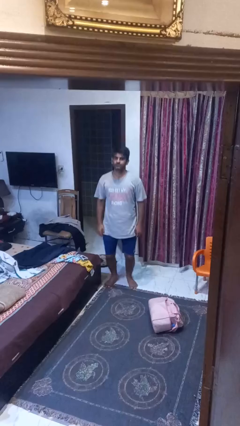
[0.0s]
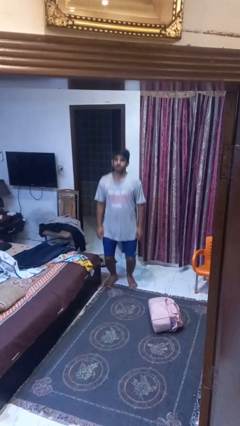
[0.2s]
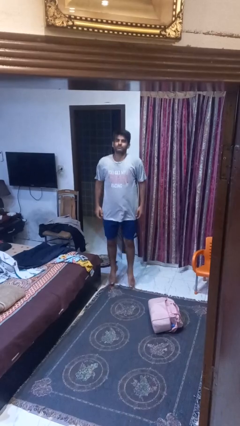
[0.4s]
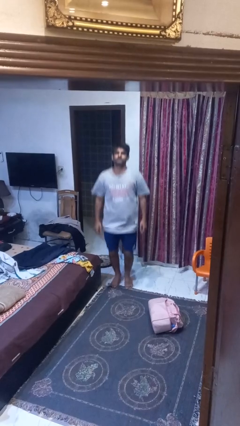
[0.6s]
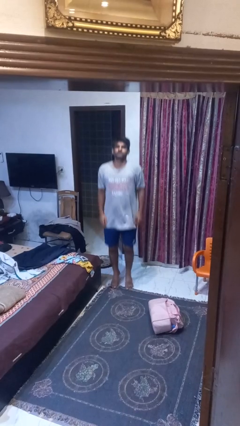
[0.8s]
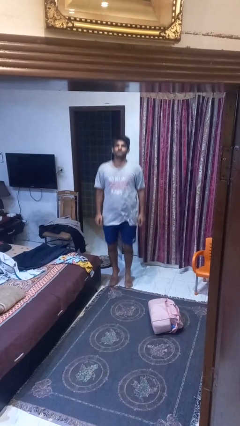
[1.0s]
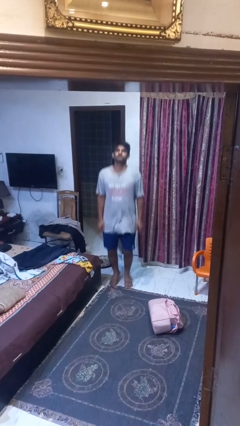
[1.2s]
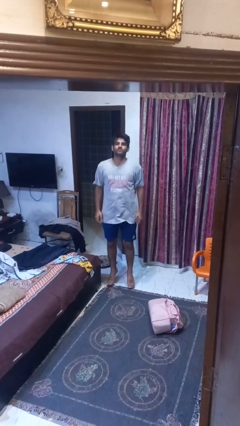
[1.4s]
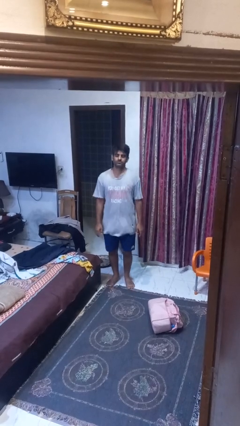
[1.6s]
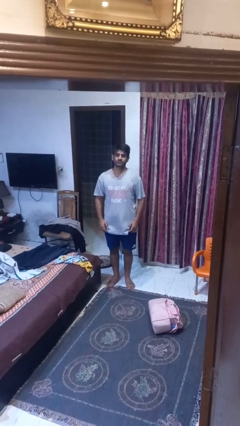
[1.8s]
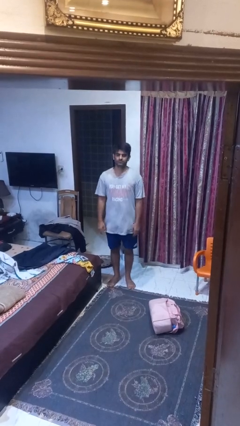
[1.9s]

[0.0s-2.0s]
person jumps

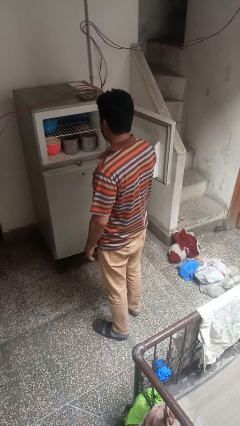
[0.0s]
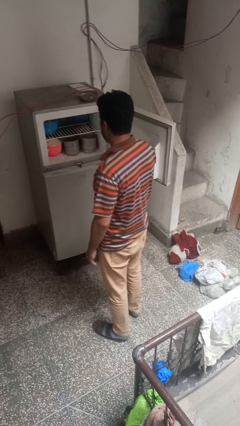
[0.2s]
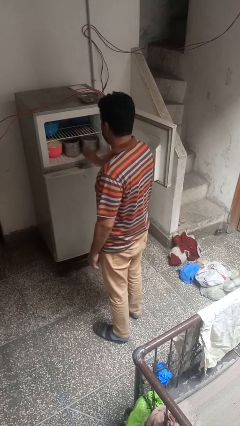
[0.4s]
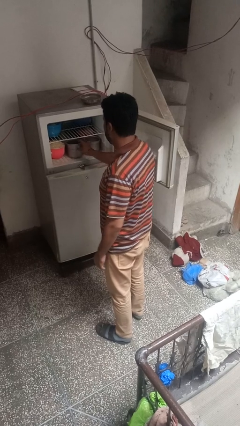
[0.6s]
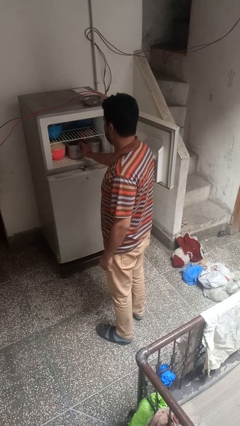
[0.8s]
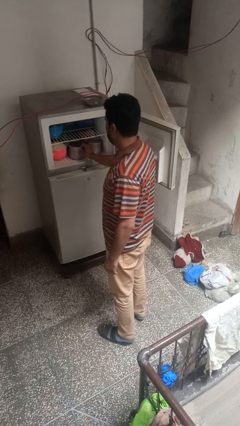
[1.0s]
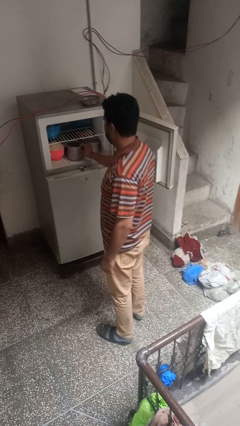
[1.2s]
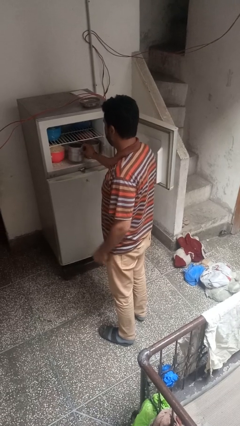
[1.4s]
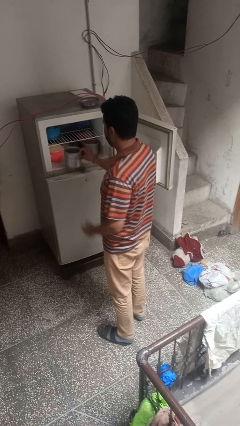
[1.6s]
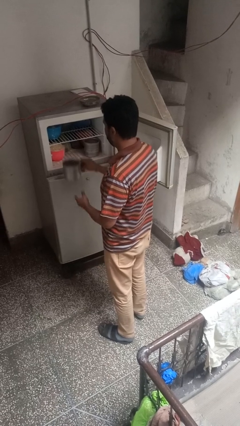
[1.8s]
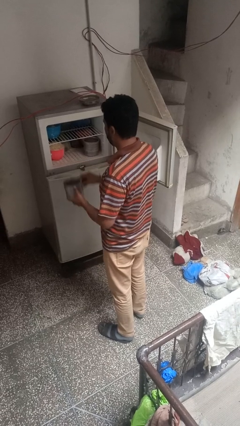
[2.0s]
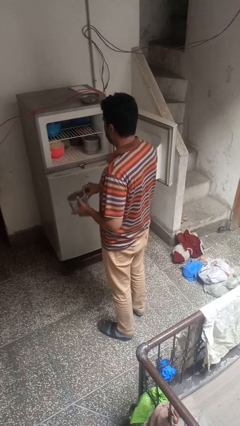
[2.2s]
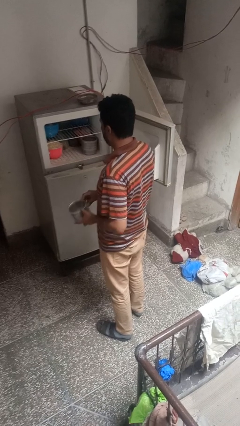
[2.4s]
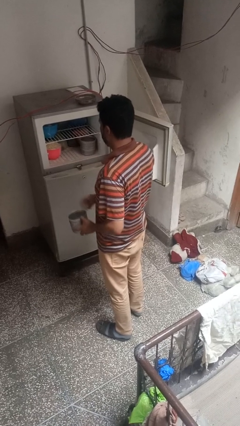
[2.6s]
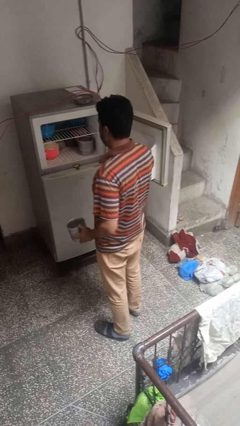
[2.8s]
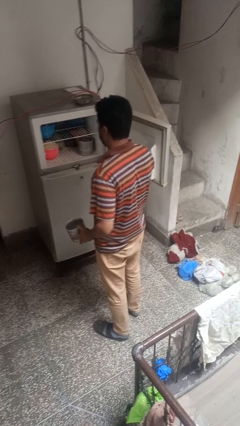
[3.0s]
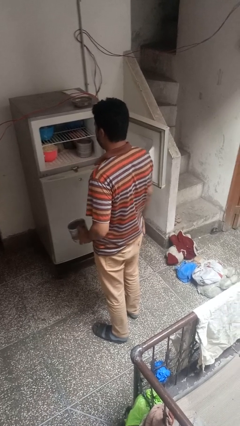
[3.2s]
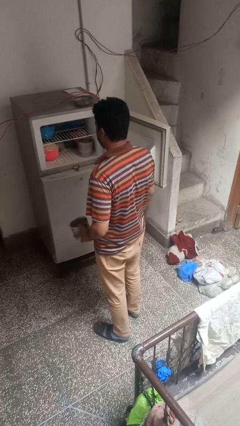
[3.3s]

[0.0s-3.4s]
person takes object from refrigerator

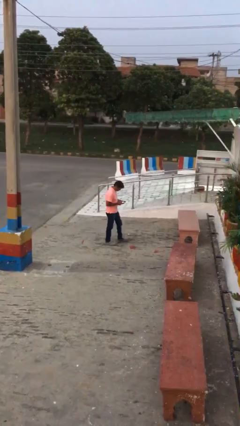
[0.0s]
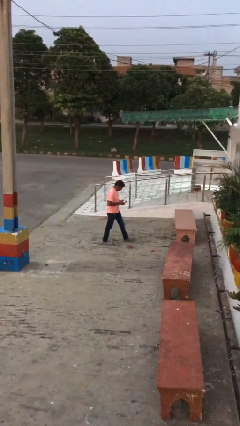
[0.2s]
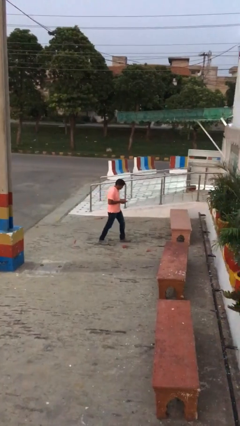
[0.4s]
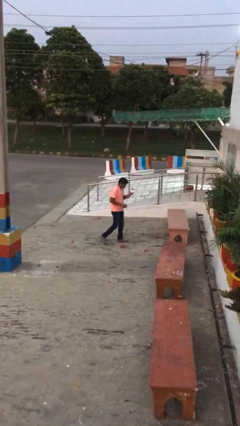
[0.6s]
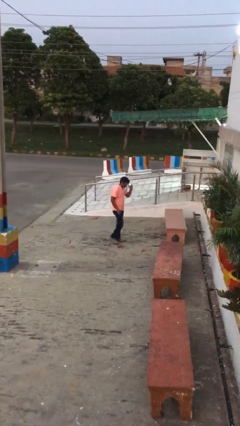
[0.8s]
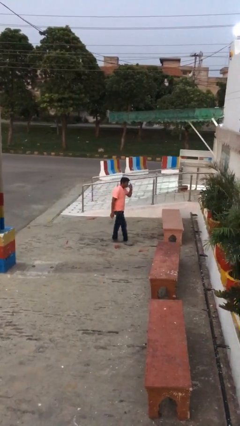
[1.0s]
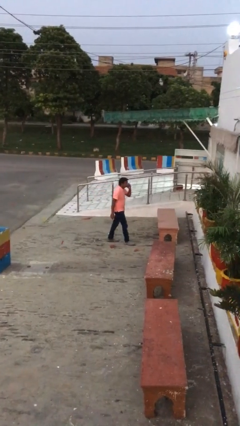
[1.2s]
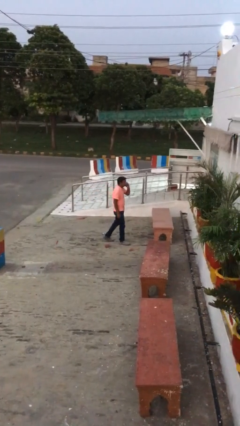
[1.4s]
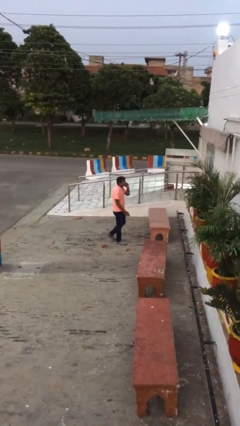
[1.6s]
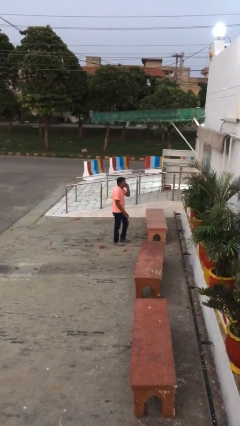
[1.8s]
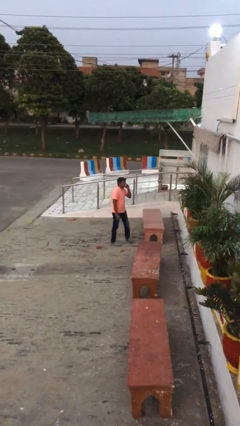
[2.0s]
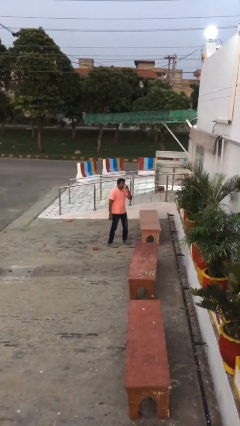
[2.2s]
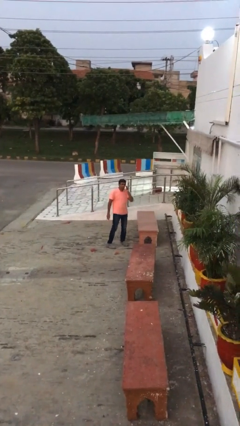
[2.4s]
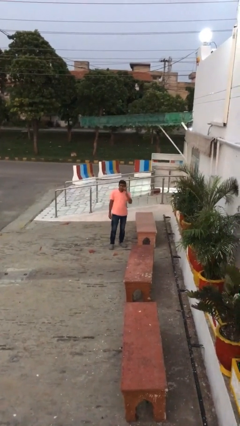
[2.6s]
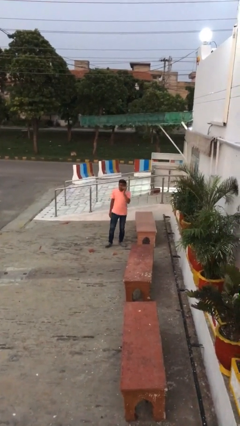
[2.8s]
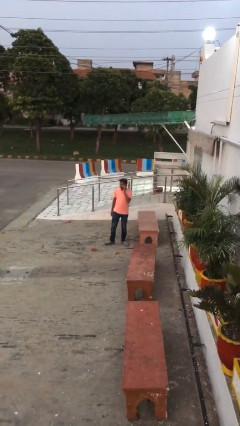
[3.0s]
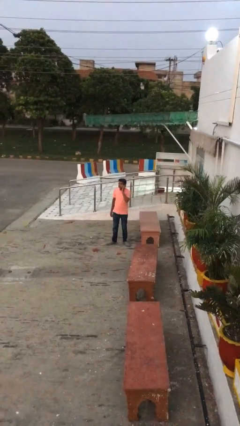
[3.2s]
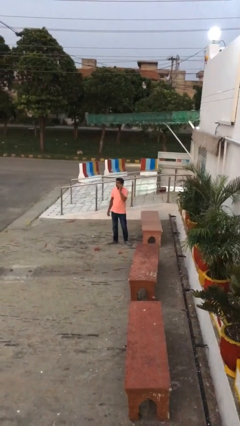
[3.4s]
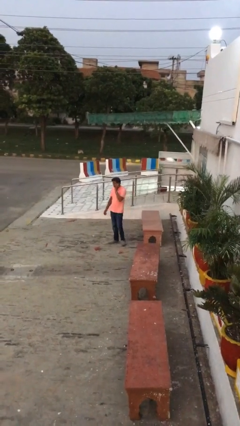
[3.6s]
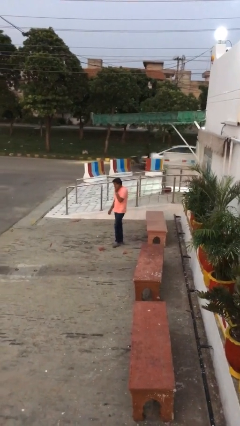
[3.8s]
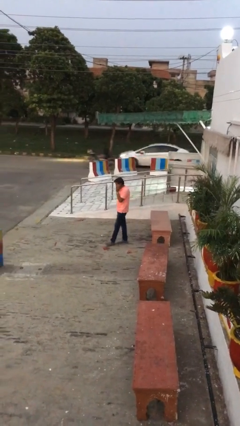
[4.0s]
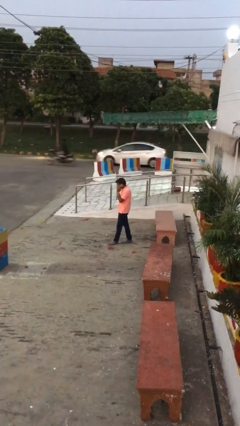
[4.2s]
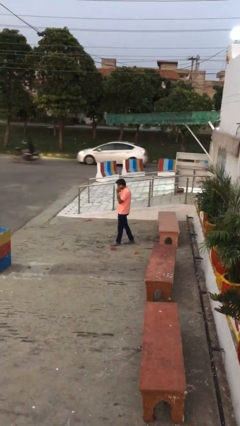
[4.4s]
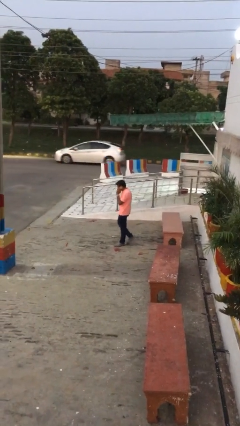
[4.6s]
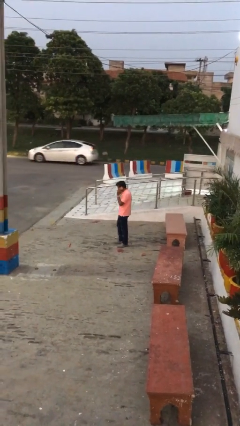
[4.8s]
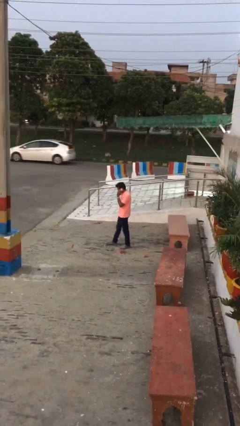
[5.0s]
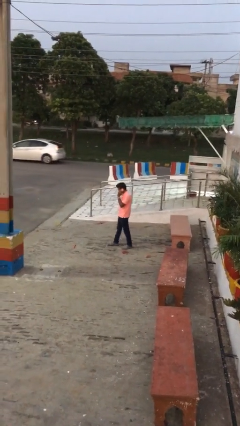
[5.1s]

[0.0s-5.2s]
person talks on phone

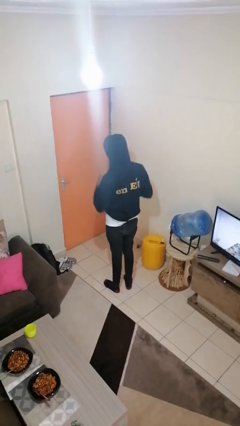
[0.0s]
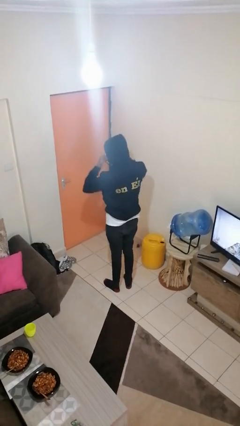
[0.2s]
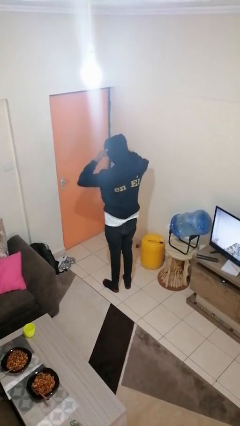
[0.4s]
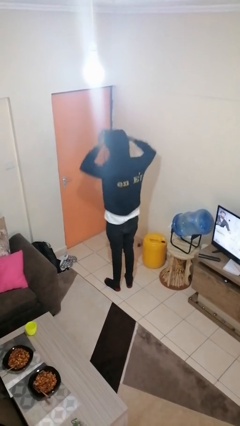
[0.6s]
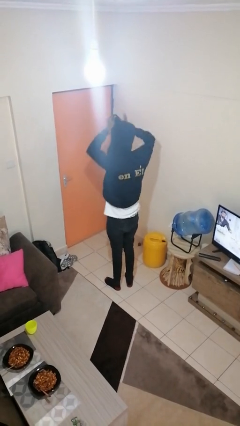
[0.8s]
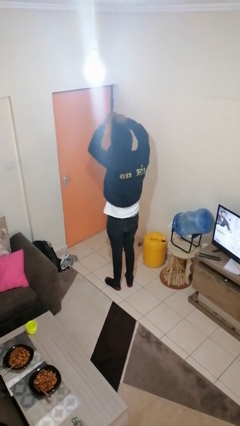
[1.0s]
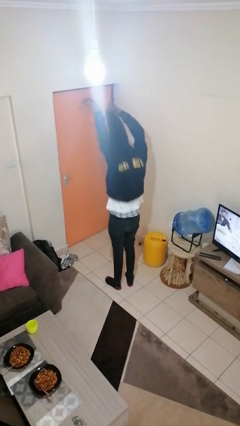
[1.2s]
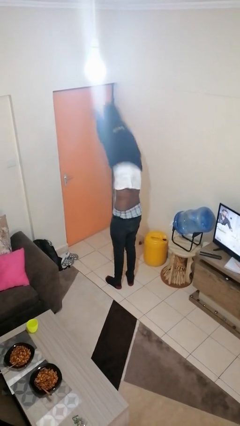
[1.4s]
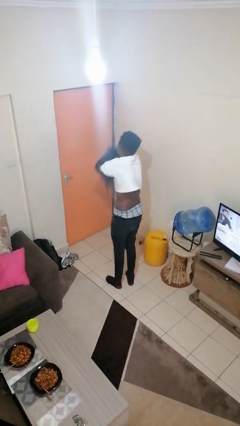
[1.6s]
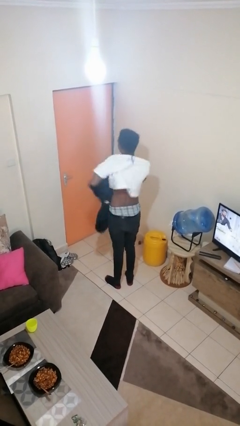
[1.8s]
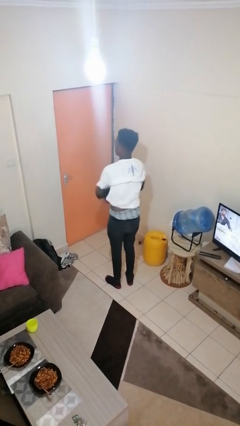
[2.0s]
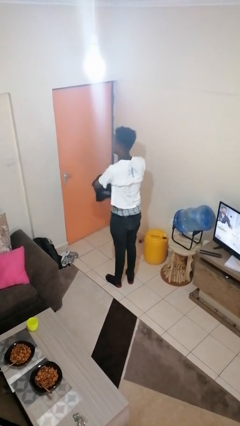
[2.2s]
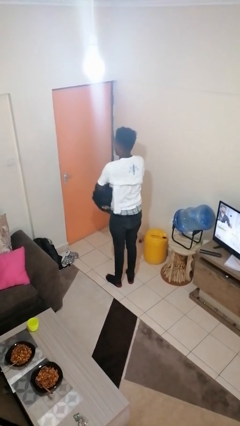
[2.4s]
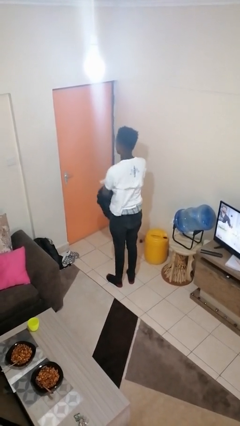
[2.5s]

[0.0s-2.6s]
person takes off hoodie

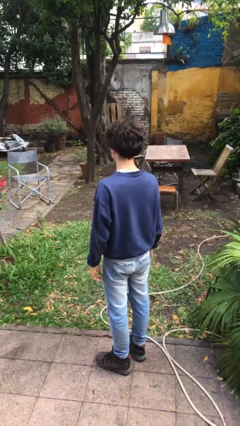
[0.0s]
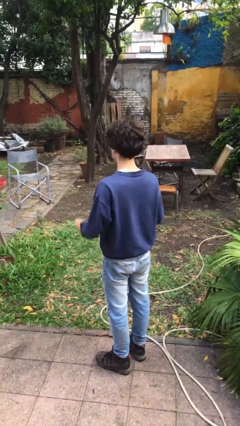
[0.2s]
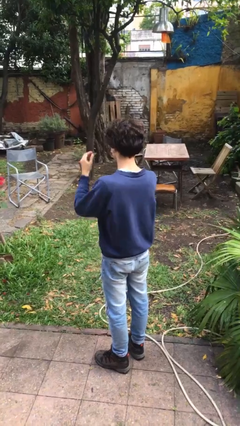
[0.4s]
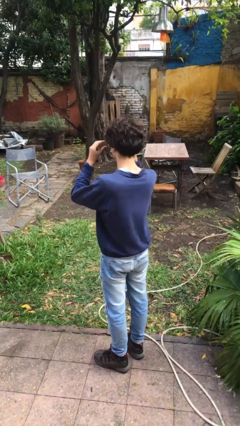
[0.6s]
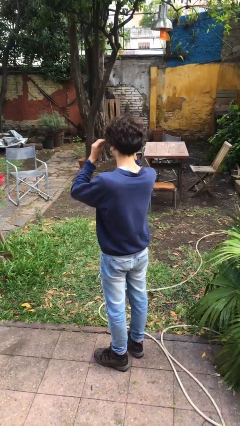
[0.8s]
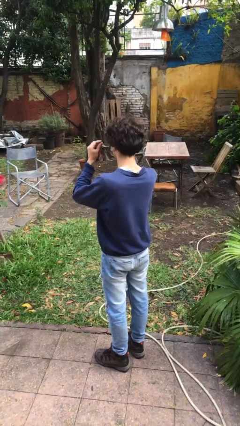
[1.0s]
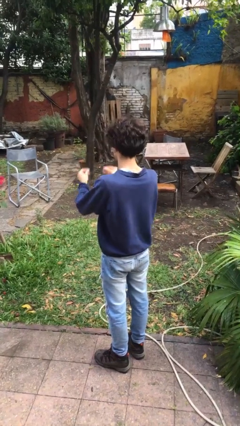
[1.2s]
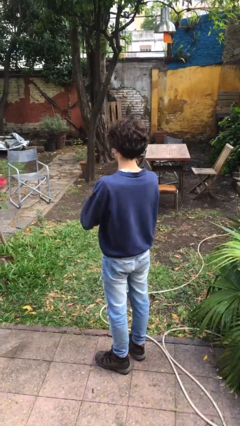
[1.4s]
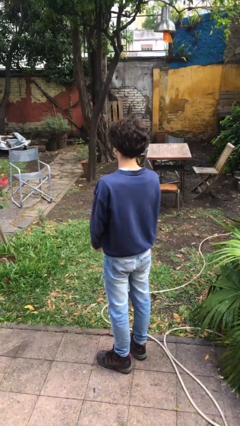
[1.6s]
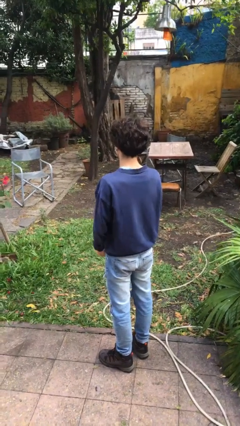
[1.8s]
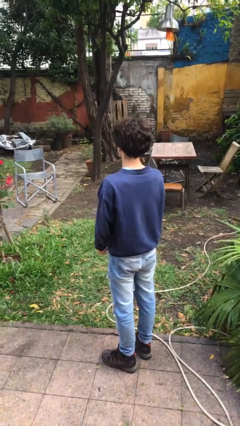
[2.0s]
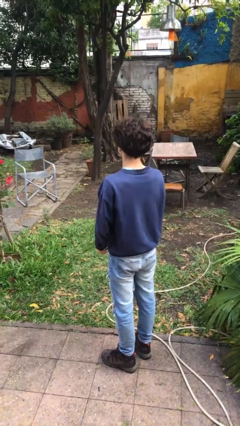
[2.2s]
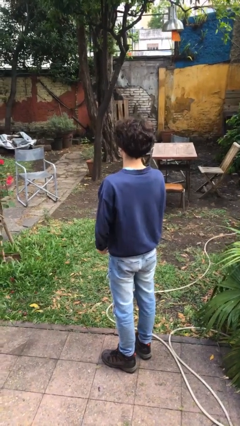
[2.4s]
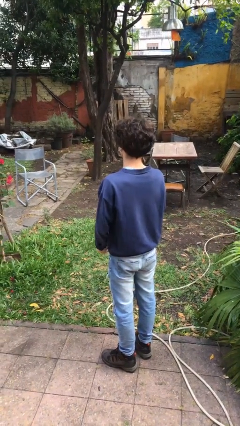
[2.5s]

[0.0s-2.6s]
person takes off glasses

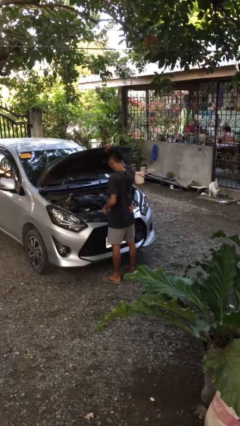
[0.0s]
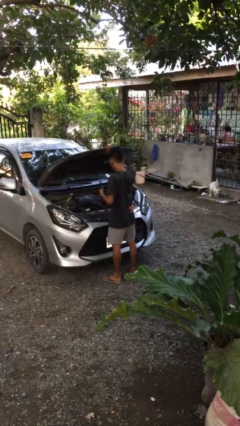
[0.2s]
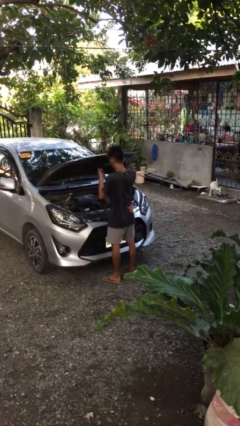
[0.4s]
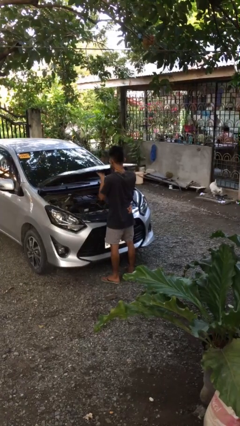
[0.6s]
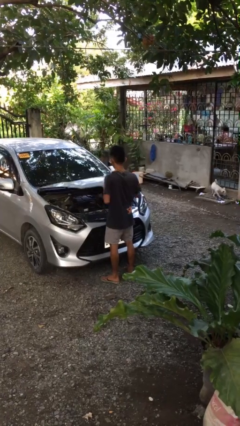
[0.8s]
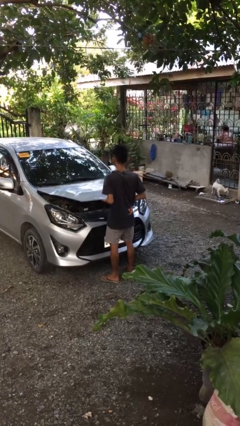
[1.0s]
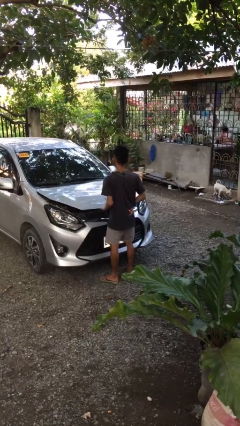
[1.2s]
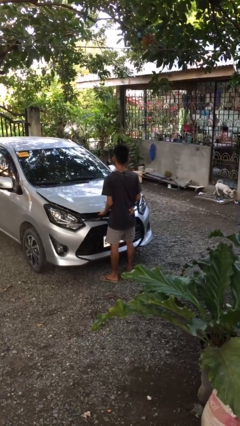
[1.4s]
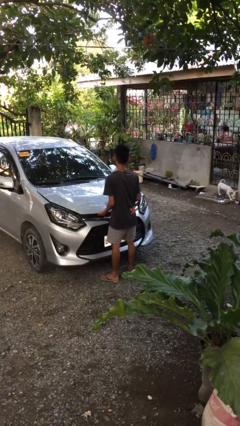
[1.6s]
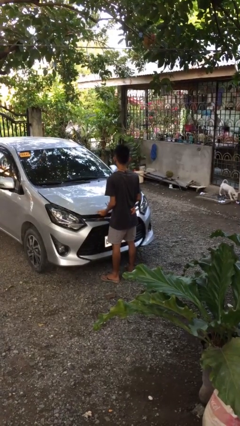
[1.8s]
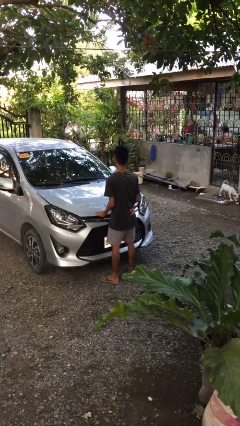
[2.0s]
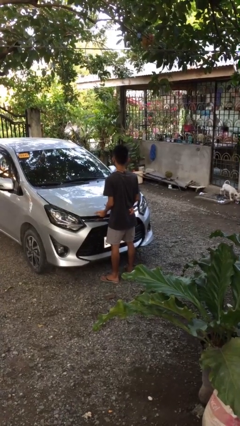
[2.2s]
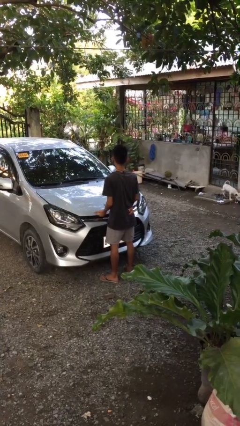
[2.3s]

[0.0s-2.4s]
person closes car hood
